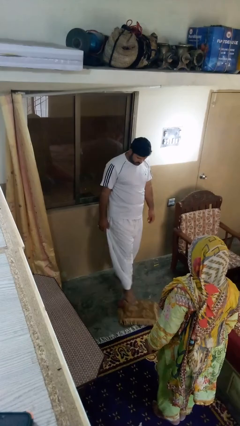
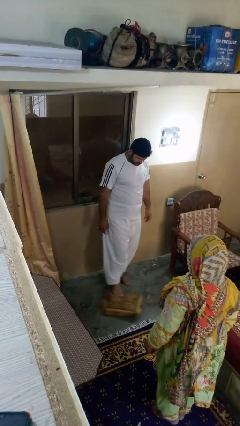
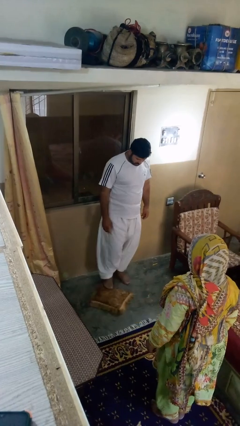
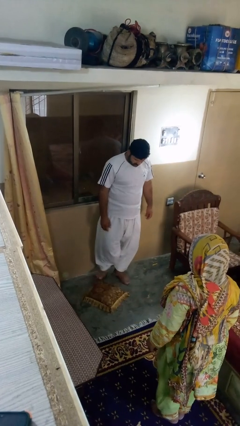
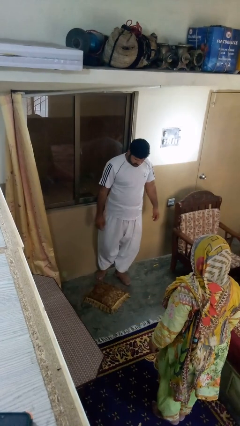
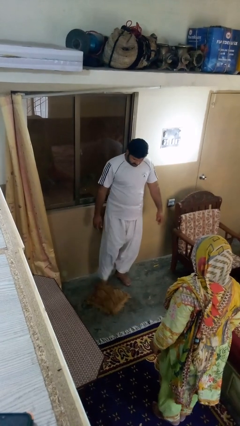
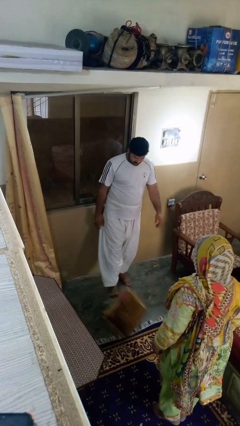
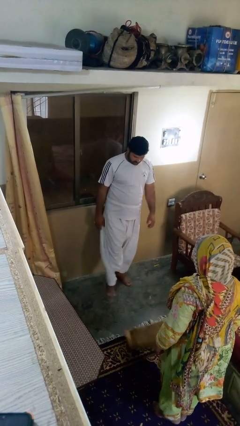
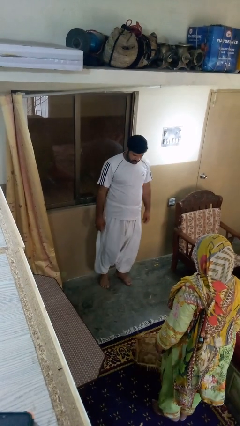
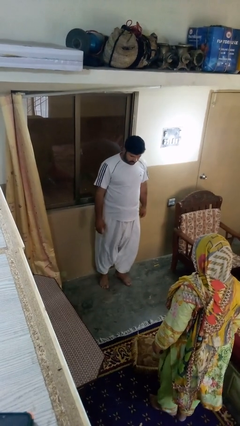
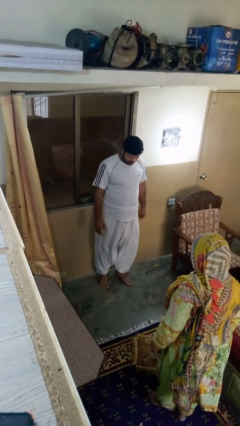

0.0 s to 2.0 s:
person kicks object to person

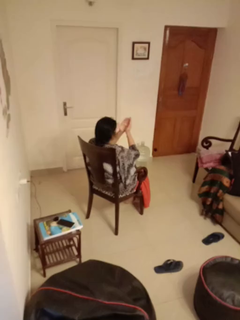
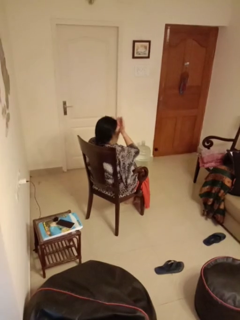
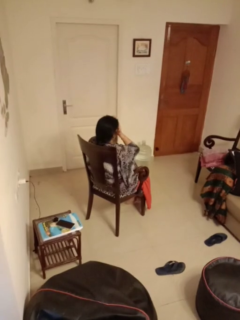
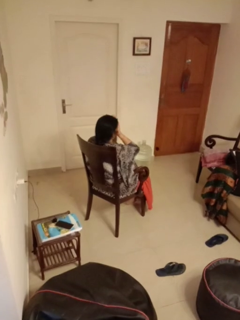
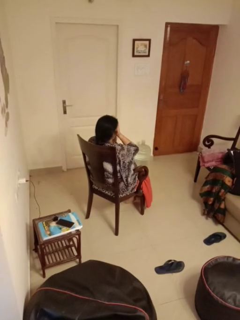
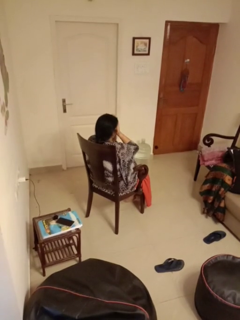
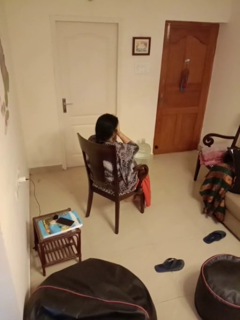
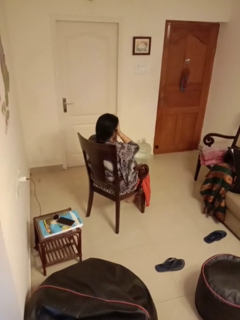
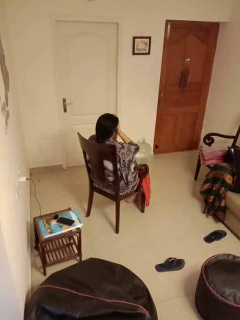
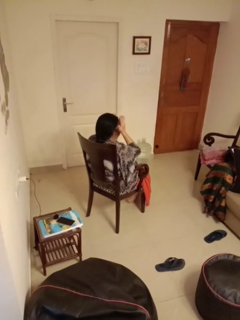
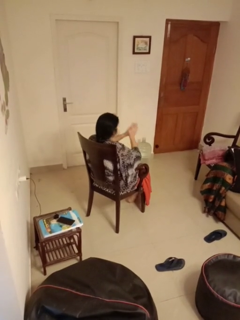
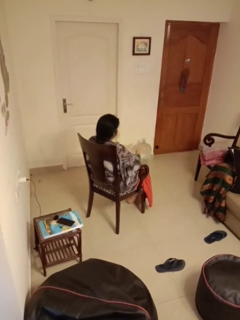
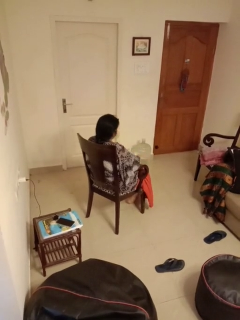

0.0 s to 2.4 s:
person covers face with hands

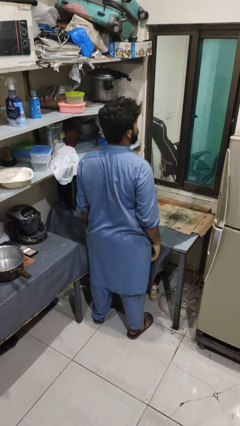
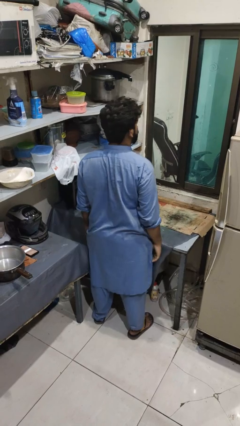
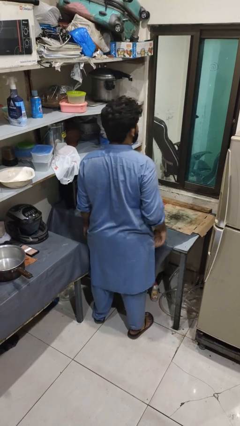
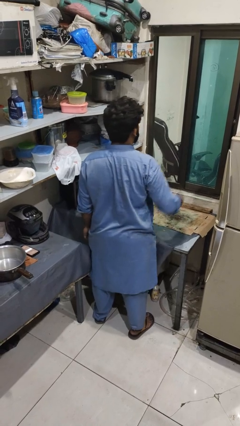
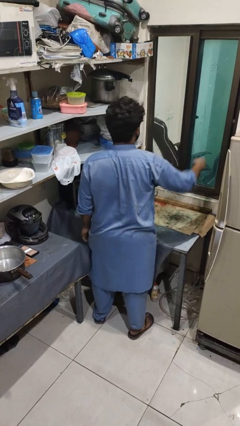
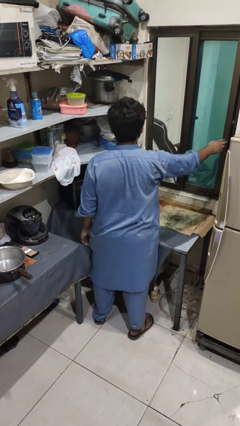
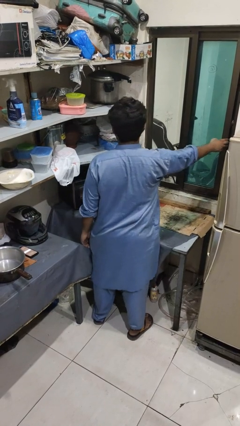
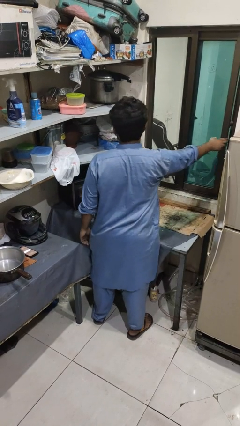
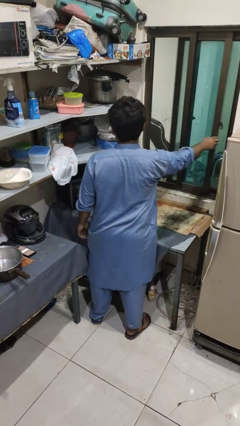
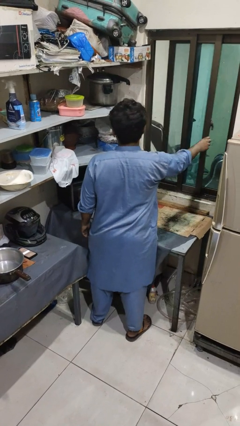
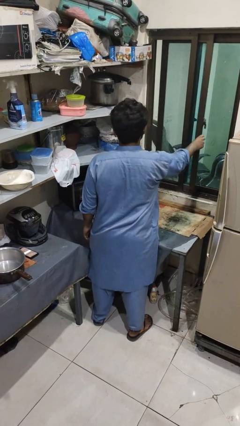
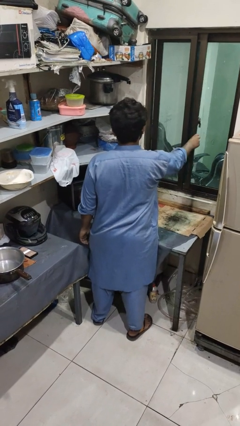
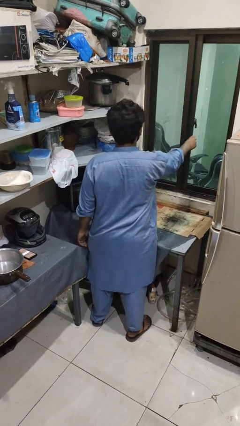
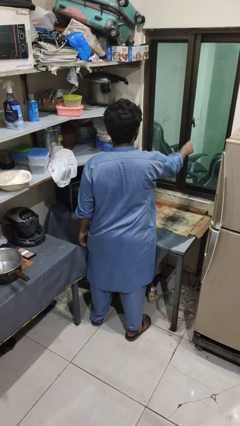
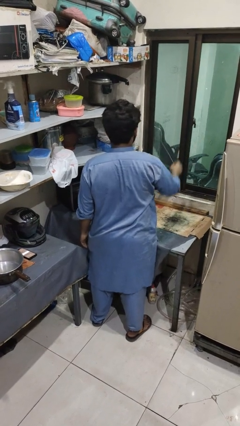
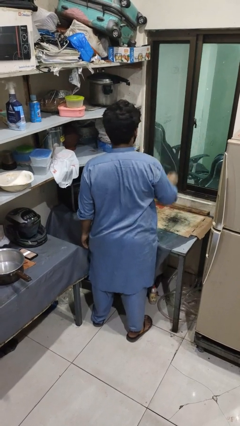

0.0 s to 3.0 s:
person closes home window

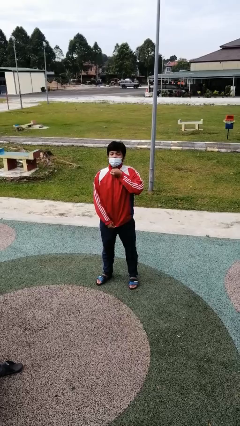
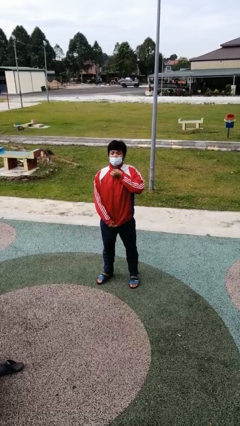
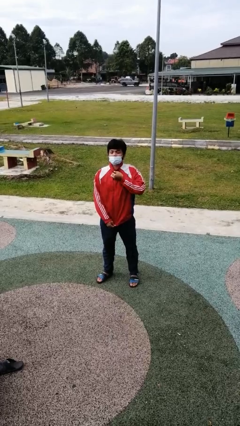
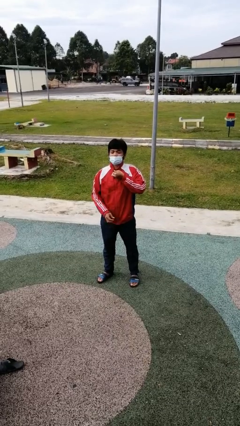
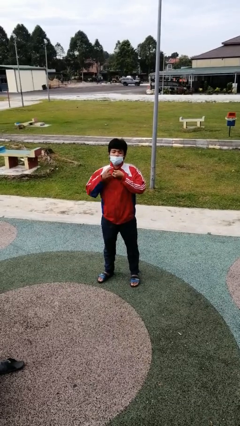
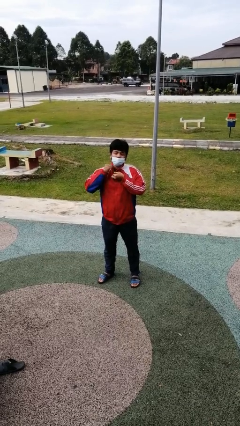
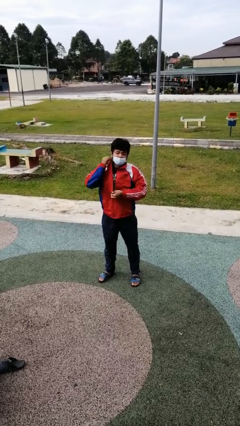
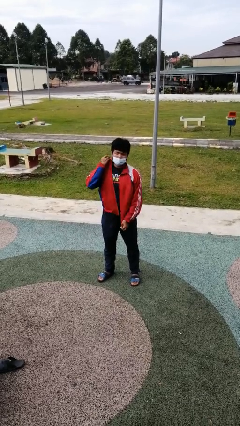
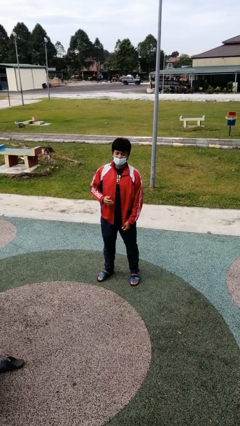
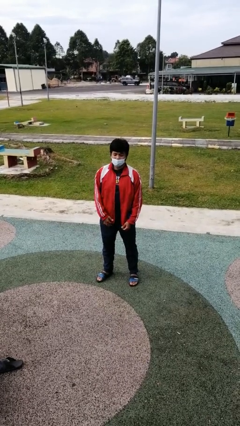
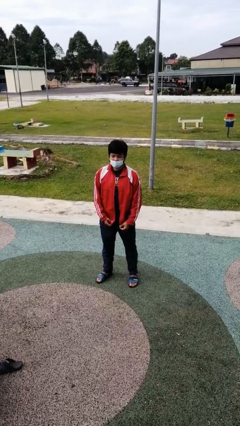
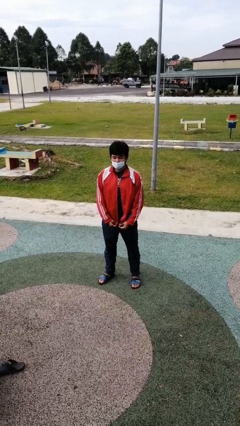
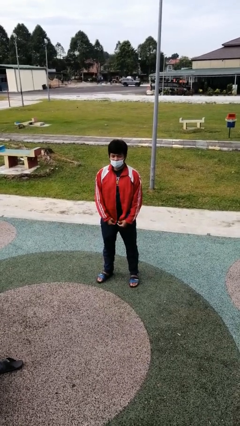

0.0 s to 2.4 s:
person unzips jacket

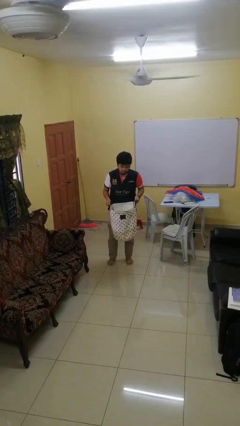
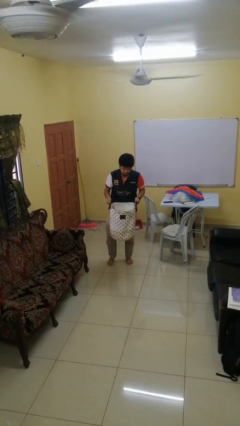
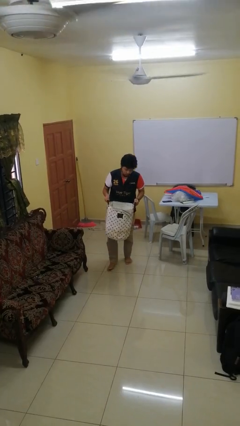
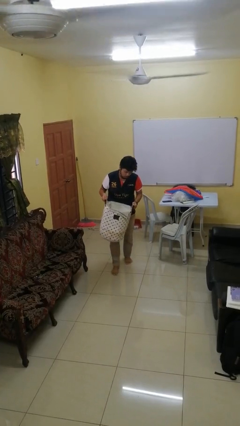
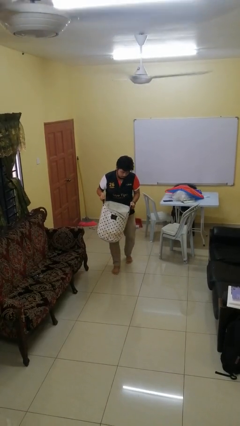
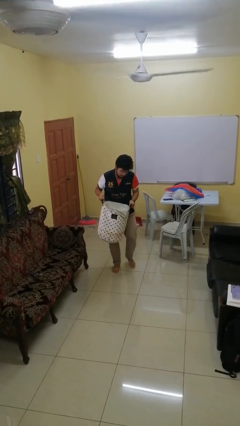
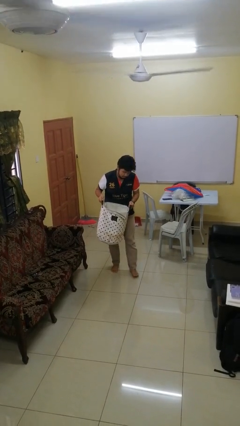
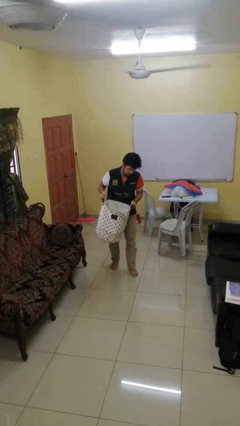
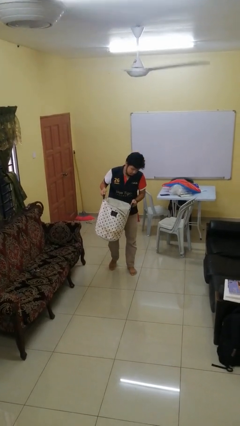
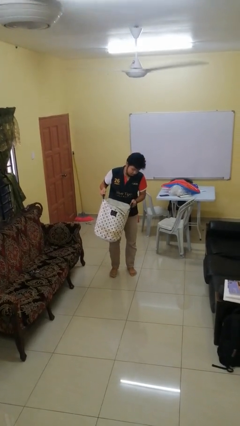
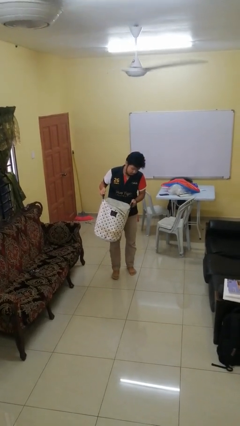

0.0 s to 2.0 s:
person carries laundry basket

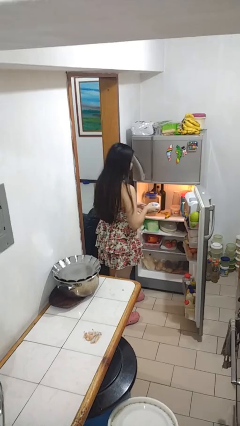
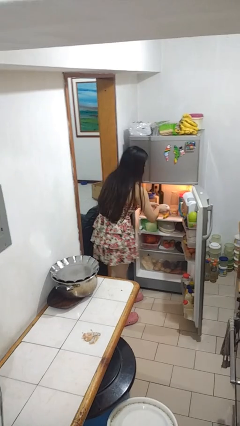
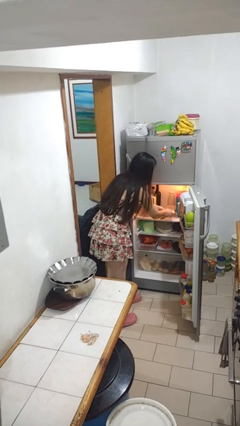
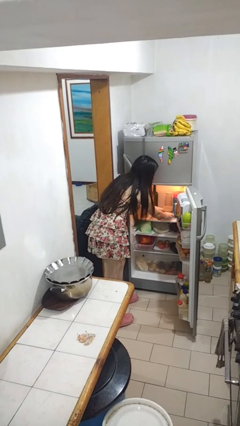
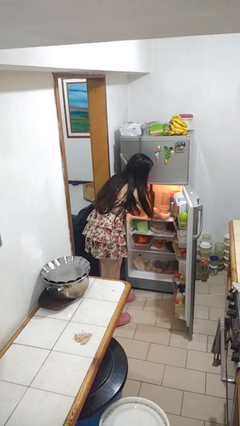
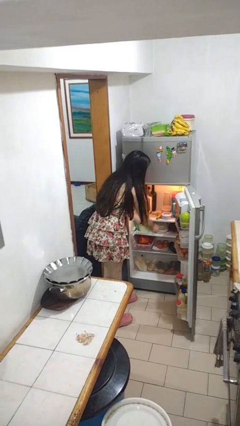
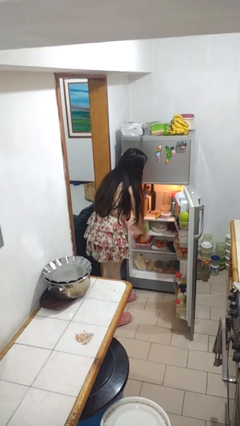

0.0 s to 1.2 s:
person puts object into refrigerator

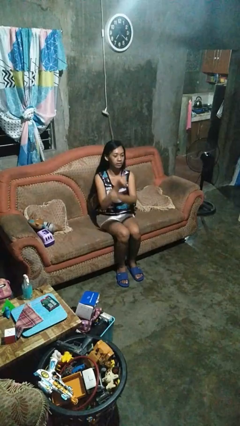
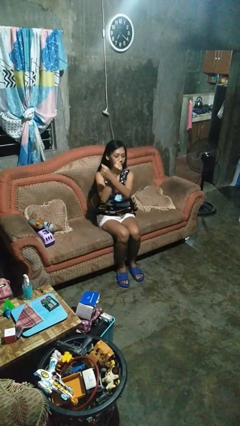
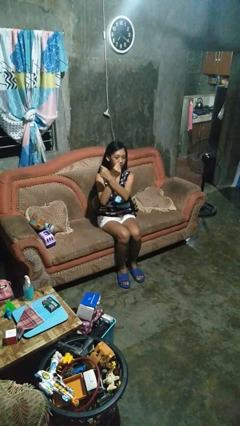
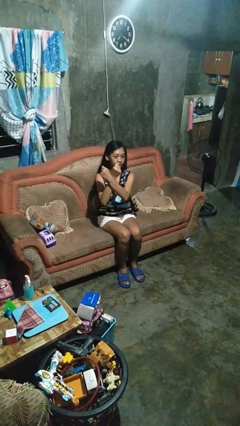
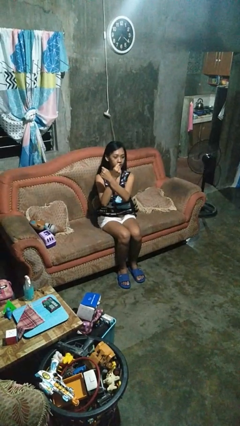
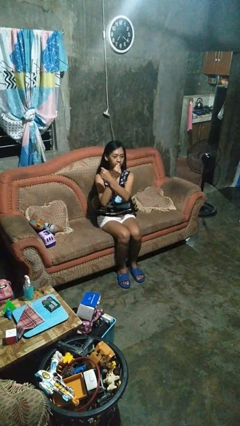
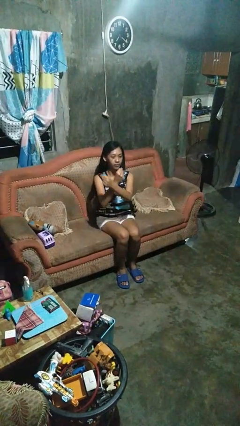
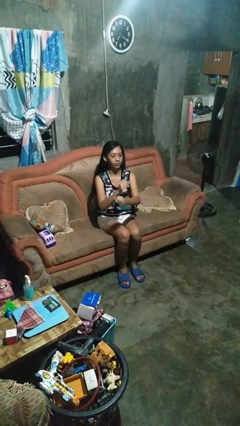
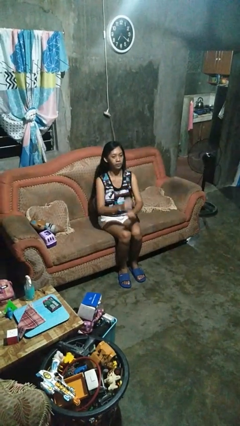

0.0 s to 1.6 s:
person gestures arms x

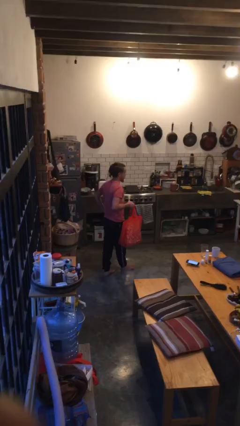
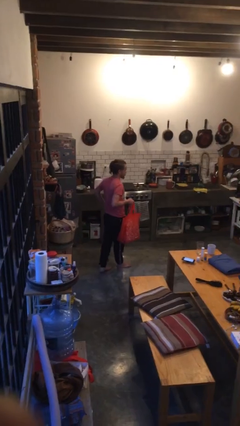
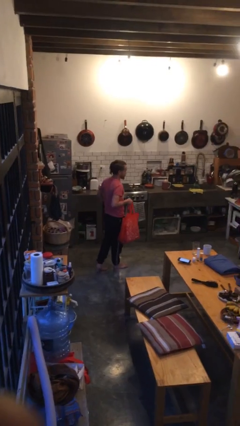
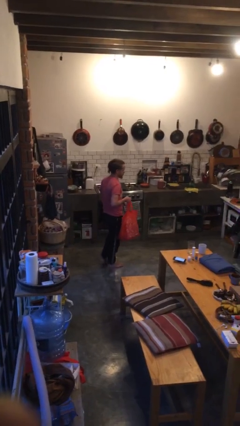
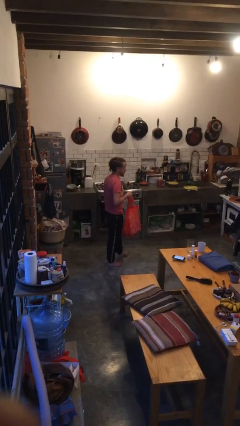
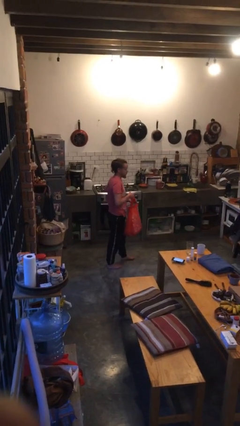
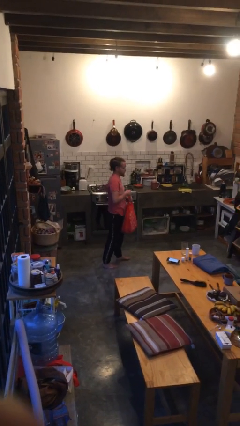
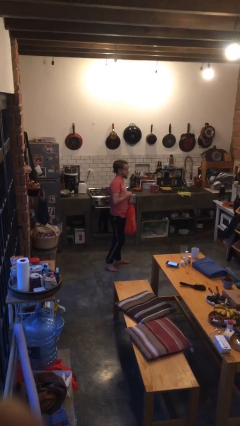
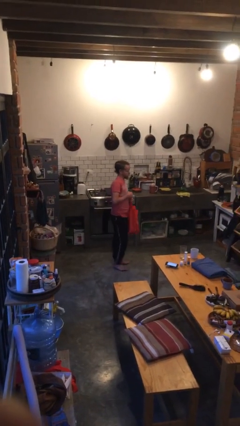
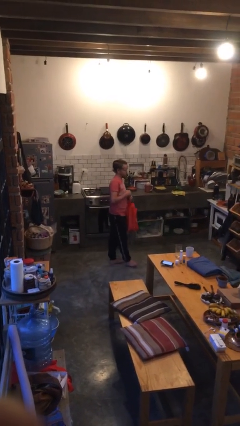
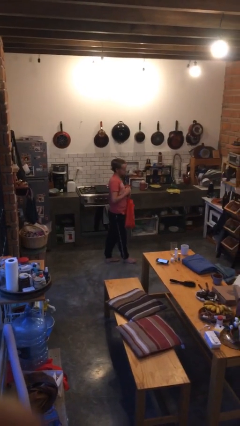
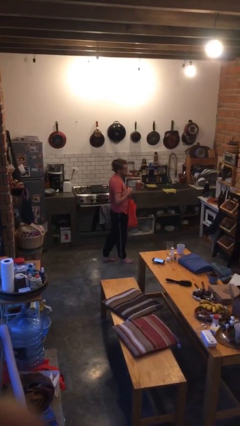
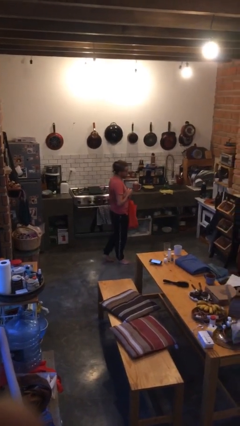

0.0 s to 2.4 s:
person carries groceries

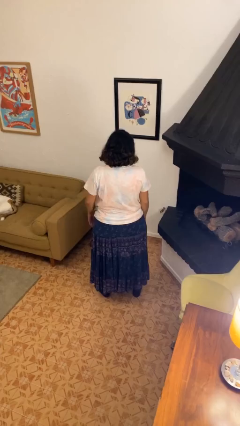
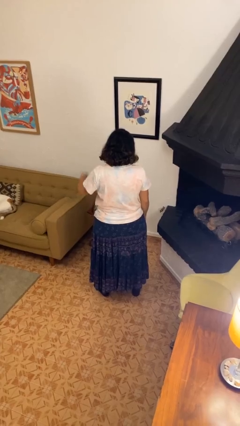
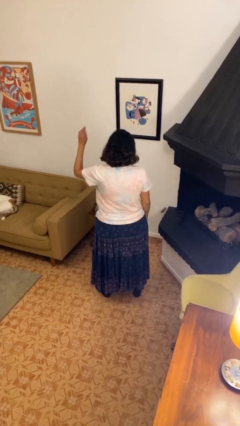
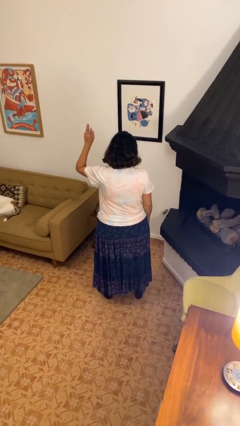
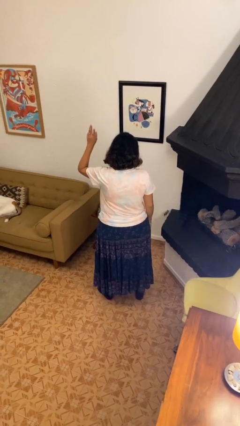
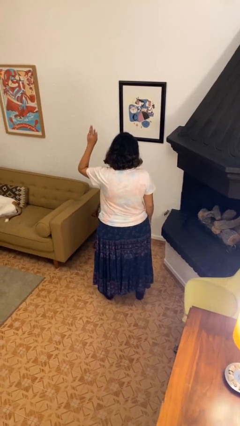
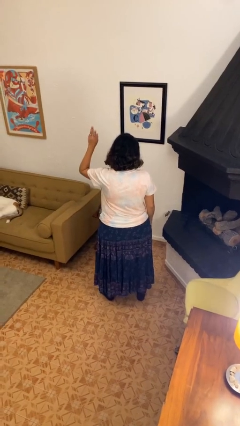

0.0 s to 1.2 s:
person gestures raise hand
